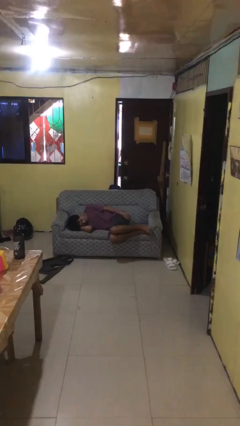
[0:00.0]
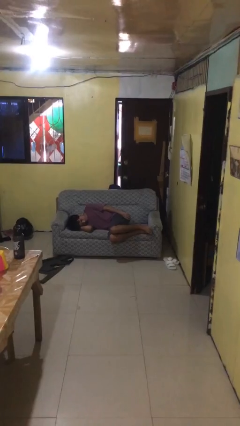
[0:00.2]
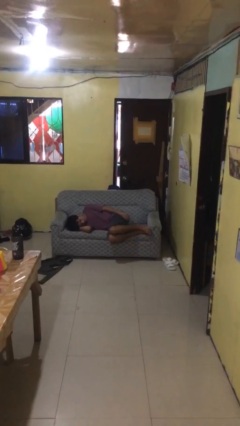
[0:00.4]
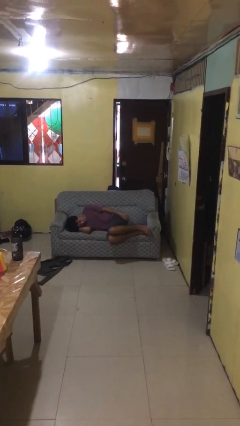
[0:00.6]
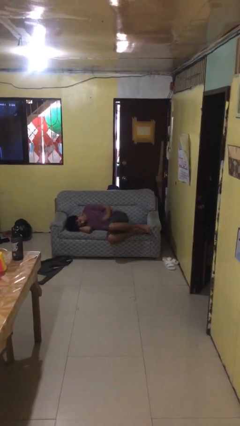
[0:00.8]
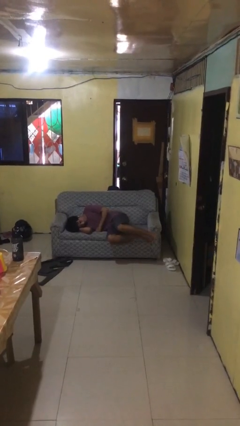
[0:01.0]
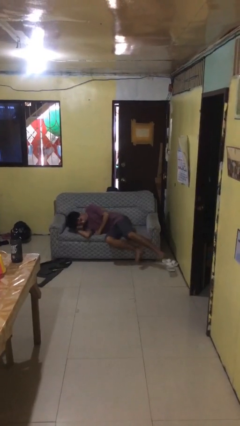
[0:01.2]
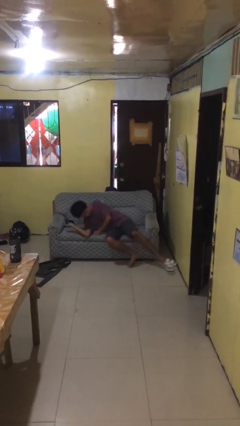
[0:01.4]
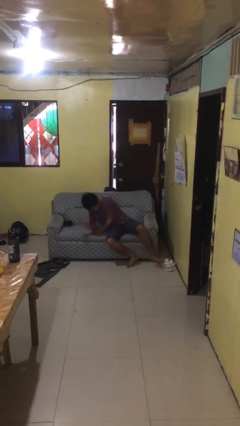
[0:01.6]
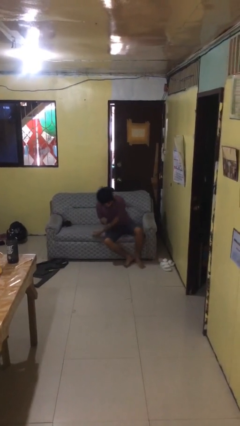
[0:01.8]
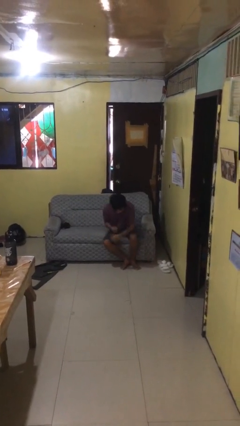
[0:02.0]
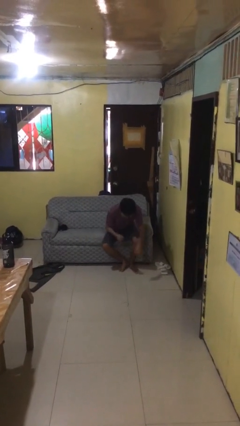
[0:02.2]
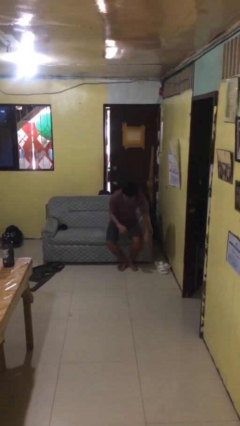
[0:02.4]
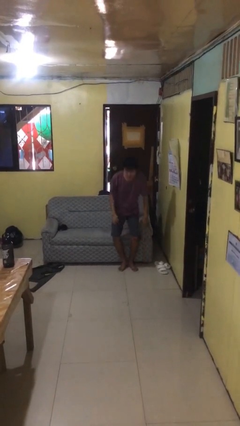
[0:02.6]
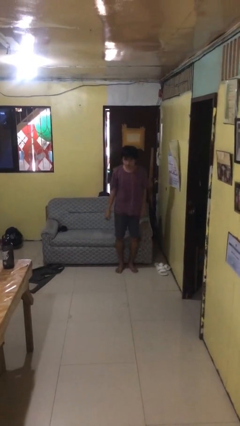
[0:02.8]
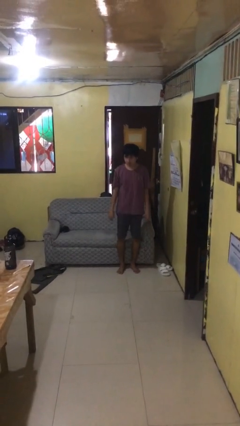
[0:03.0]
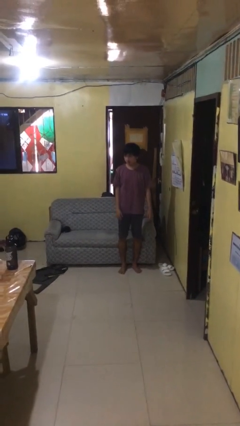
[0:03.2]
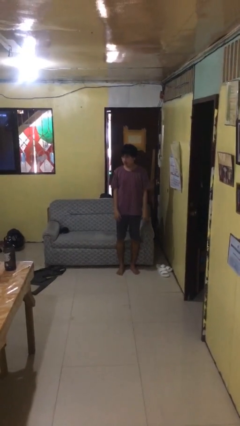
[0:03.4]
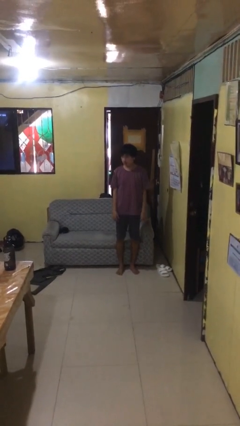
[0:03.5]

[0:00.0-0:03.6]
person stands up

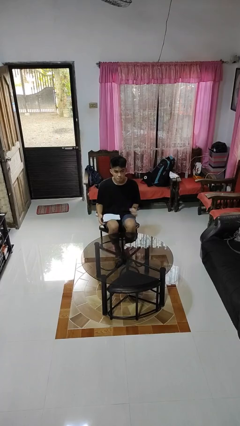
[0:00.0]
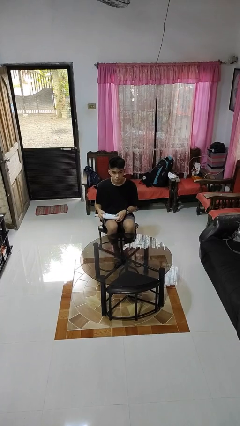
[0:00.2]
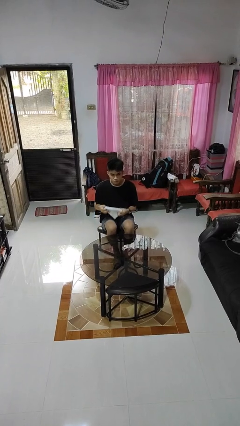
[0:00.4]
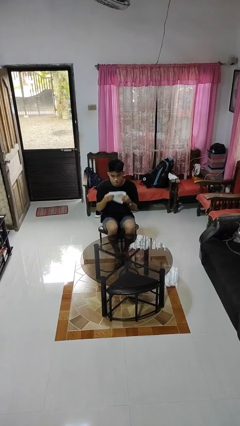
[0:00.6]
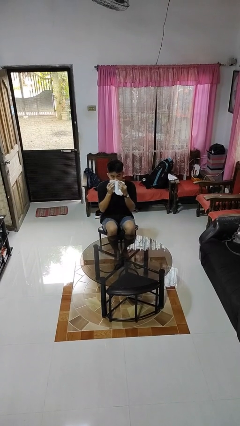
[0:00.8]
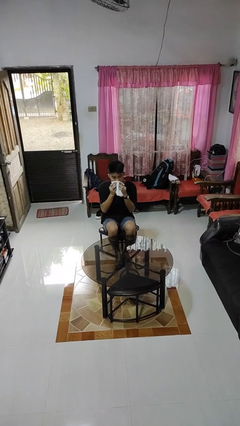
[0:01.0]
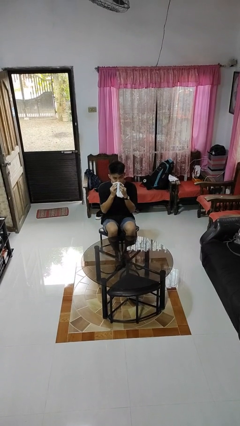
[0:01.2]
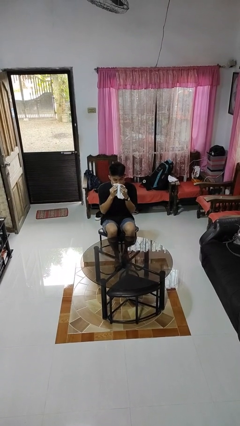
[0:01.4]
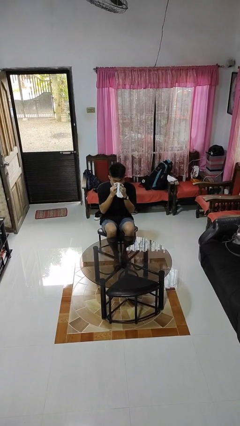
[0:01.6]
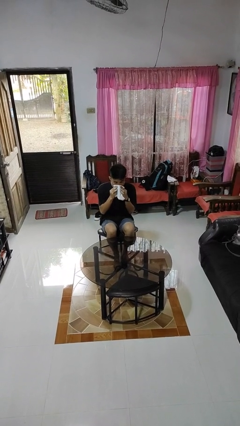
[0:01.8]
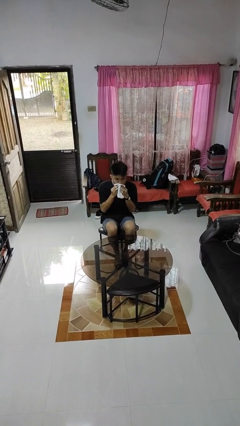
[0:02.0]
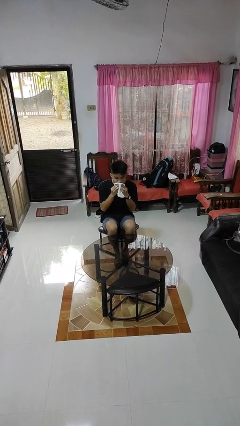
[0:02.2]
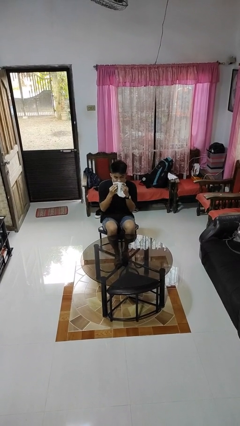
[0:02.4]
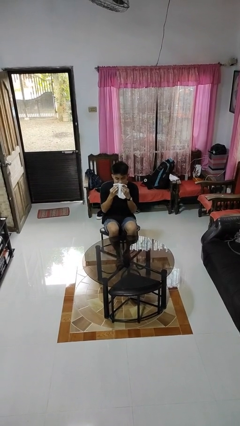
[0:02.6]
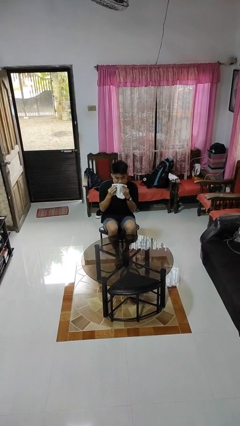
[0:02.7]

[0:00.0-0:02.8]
person wipes mouth with napkin

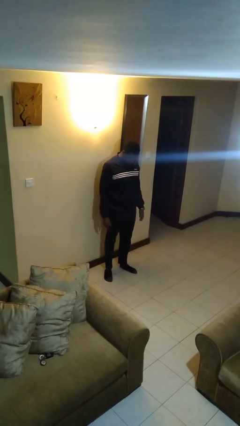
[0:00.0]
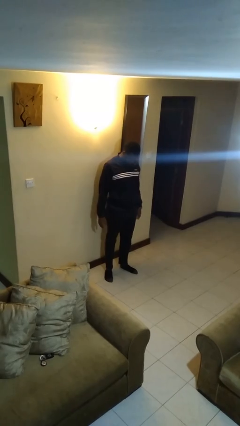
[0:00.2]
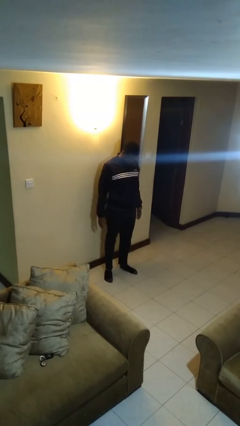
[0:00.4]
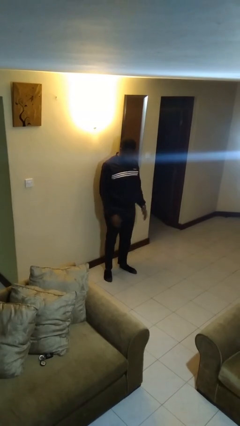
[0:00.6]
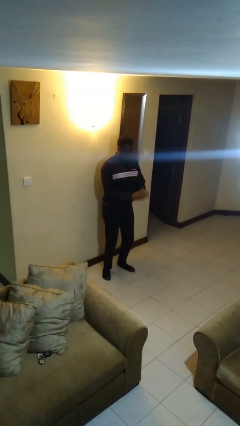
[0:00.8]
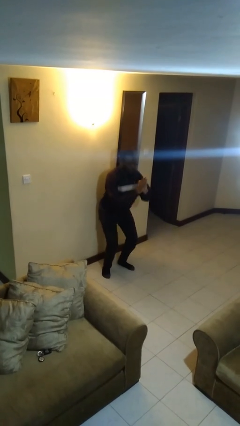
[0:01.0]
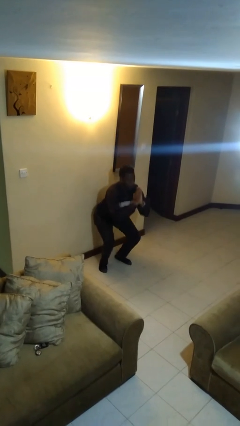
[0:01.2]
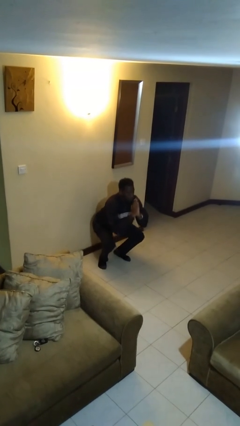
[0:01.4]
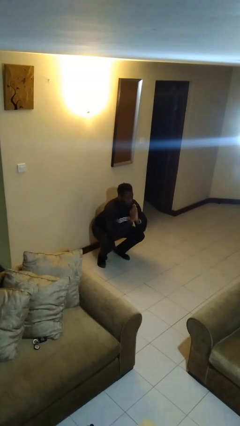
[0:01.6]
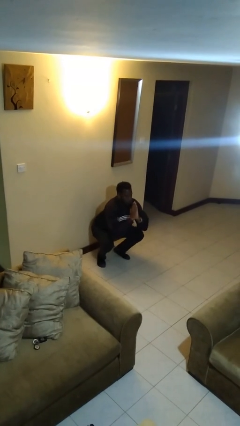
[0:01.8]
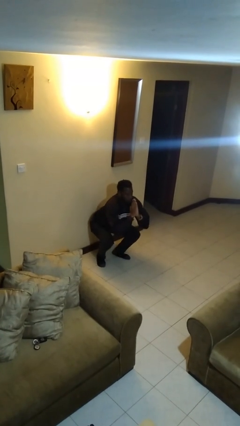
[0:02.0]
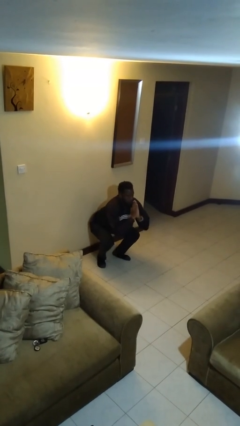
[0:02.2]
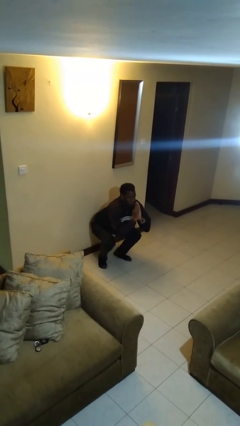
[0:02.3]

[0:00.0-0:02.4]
person squats

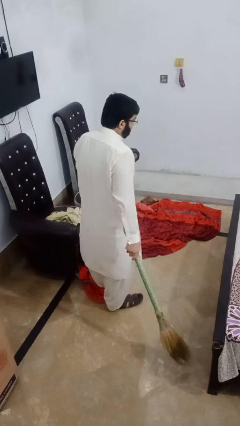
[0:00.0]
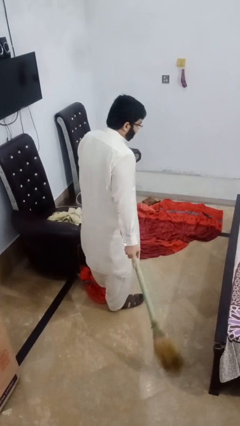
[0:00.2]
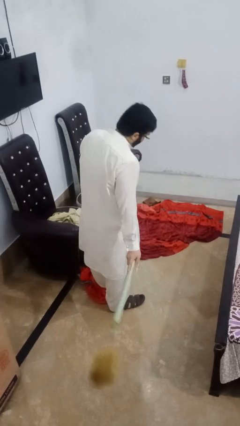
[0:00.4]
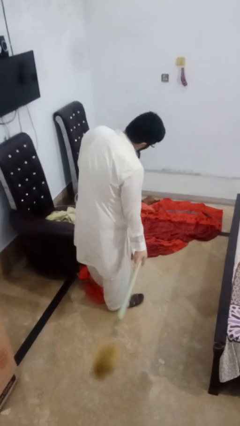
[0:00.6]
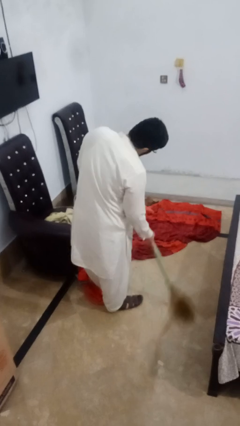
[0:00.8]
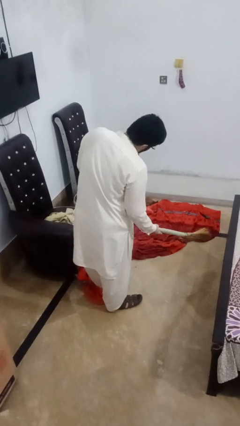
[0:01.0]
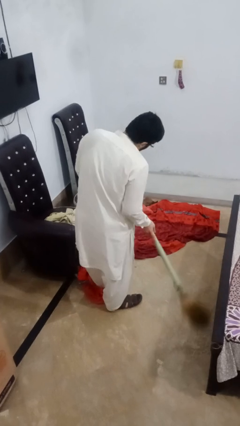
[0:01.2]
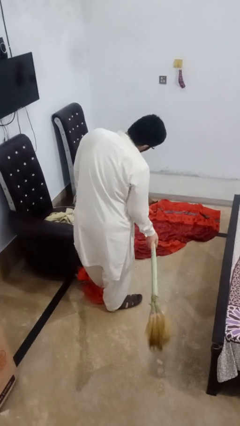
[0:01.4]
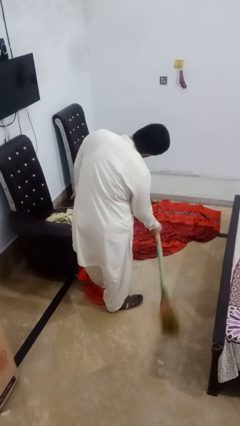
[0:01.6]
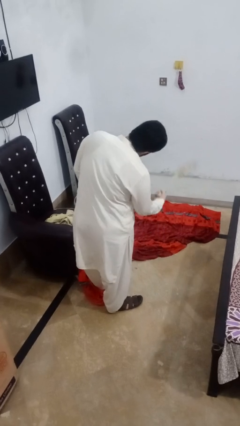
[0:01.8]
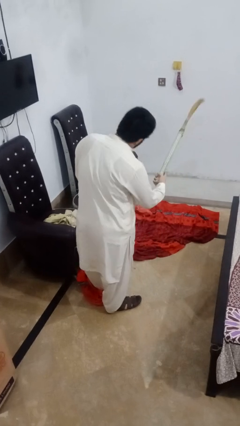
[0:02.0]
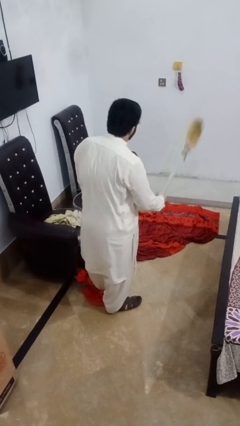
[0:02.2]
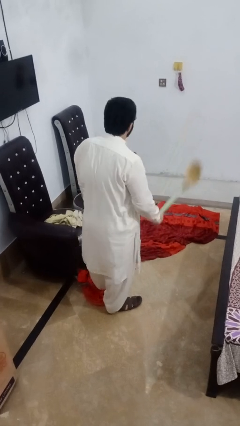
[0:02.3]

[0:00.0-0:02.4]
person sweeps floor

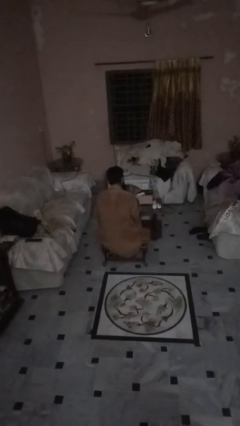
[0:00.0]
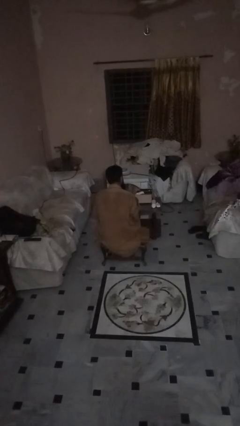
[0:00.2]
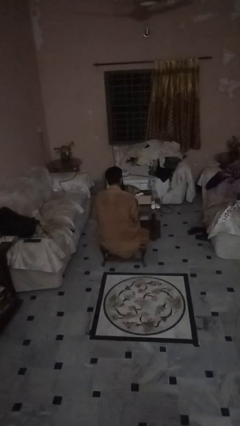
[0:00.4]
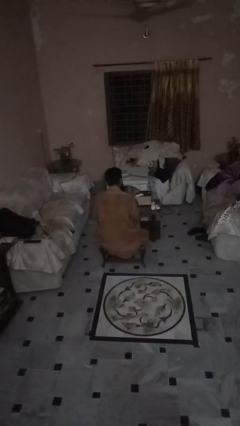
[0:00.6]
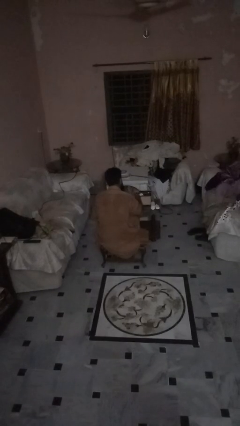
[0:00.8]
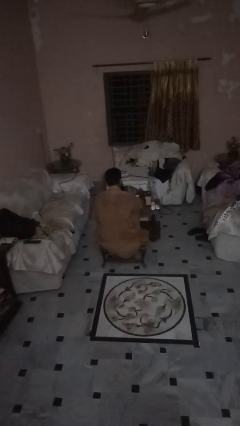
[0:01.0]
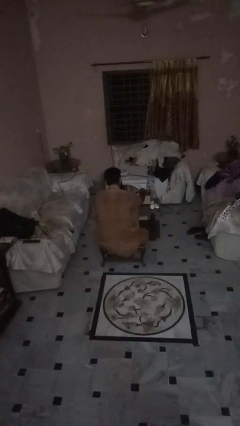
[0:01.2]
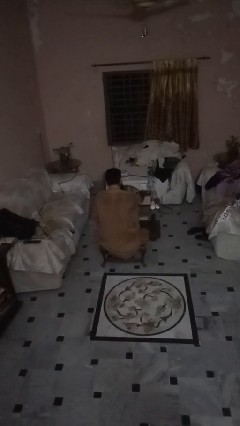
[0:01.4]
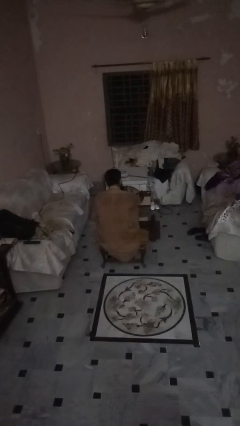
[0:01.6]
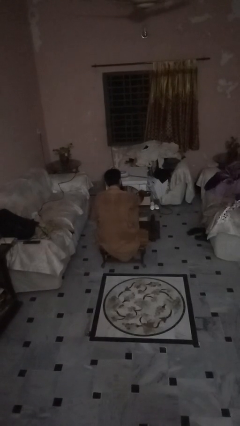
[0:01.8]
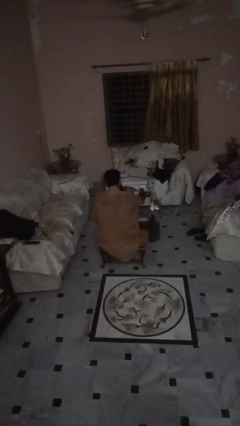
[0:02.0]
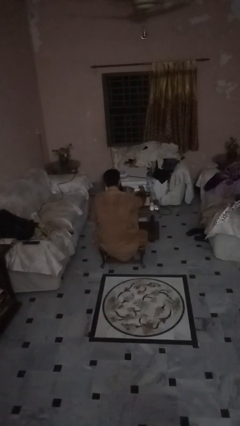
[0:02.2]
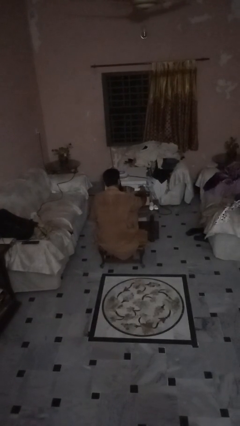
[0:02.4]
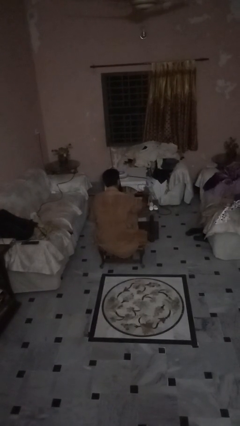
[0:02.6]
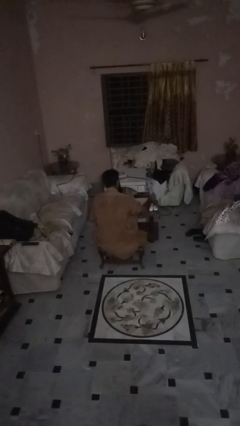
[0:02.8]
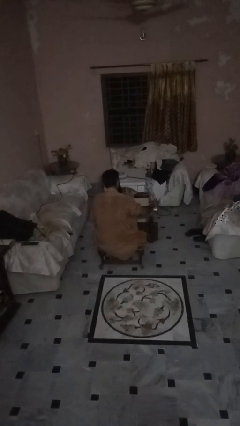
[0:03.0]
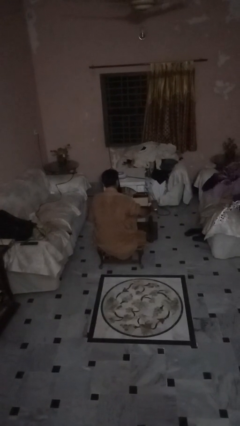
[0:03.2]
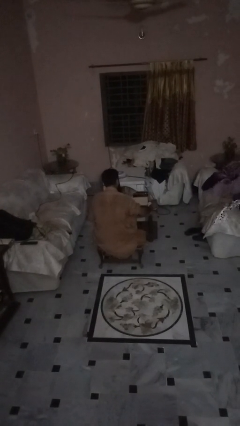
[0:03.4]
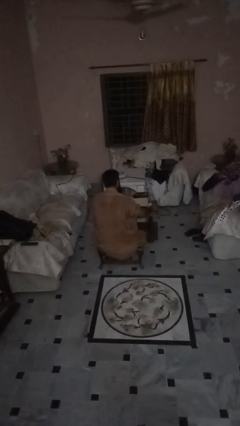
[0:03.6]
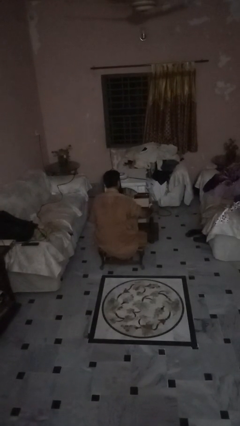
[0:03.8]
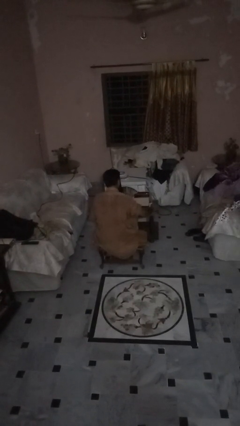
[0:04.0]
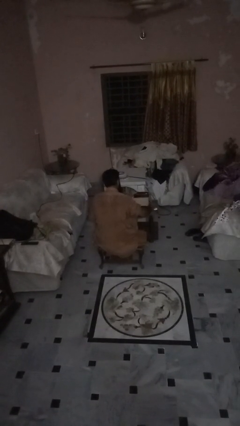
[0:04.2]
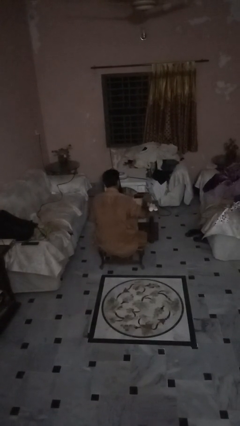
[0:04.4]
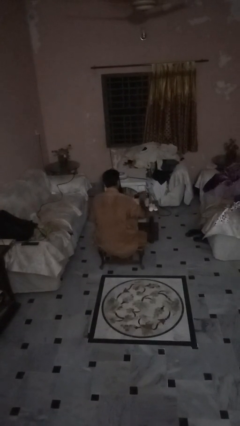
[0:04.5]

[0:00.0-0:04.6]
person unloads box onto table

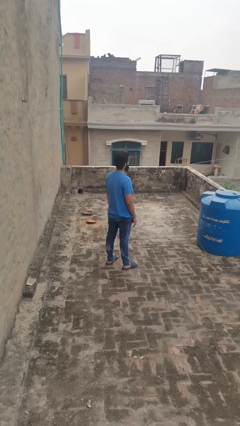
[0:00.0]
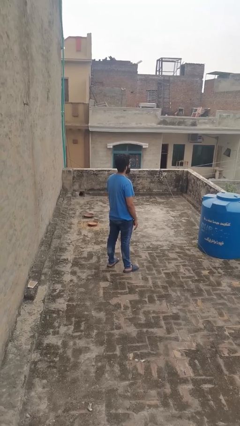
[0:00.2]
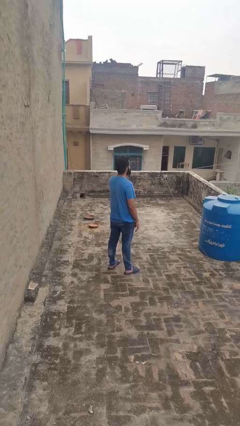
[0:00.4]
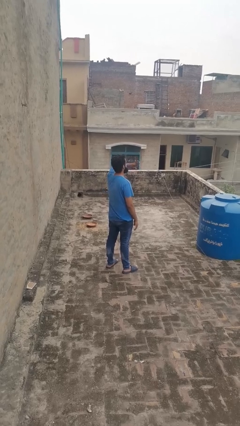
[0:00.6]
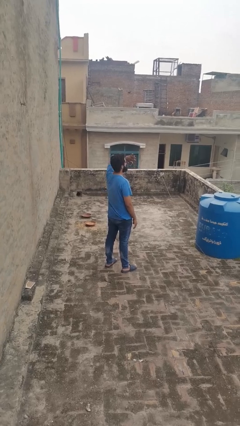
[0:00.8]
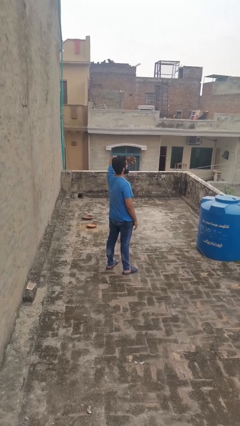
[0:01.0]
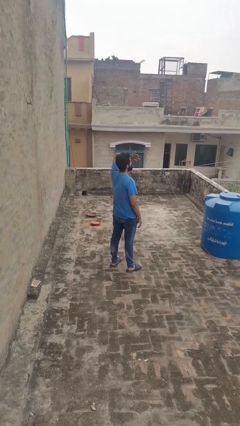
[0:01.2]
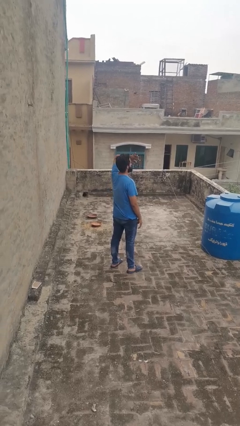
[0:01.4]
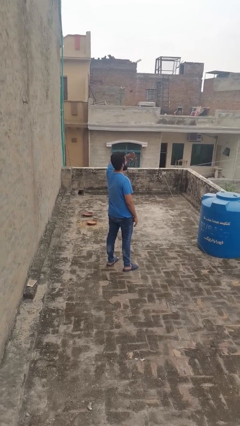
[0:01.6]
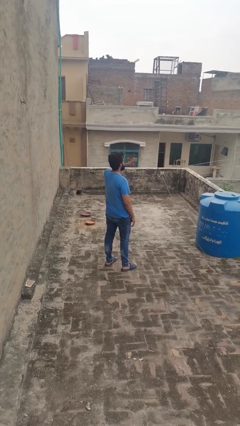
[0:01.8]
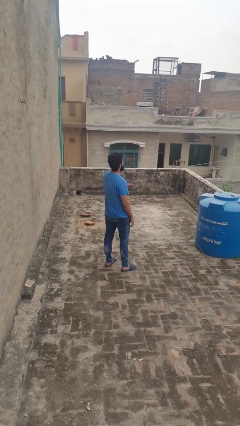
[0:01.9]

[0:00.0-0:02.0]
person shades eyes
